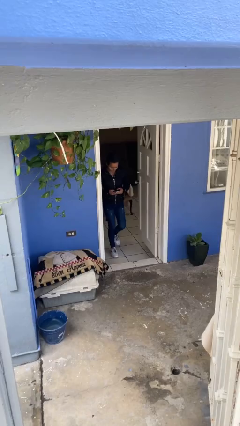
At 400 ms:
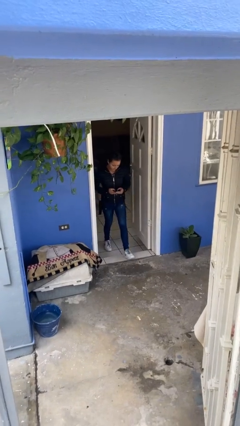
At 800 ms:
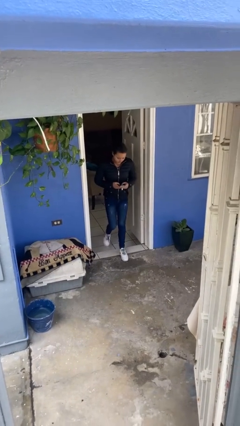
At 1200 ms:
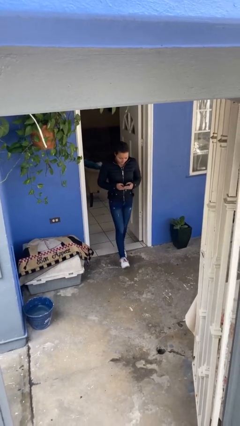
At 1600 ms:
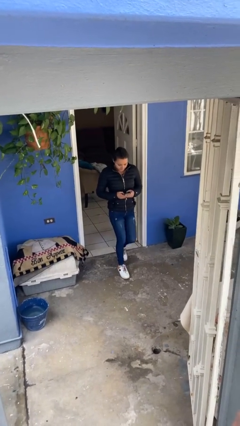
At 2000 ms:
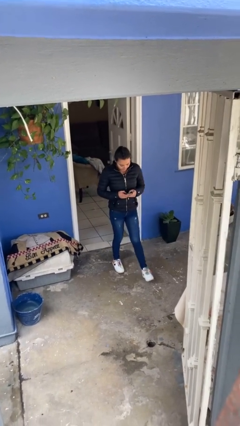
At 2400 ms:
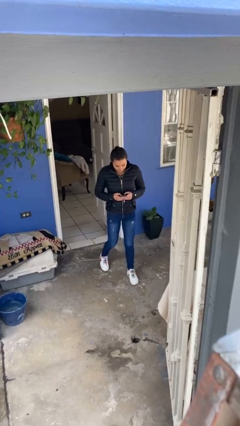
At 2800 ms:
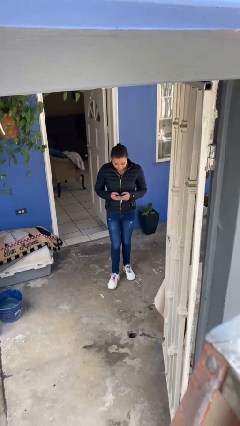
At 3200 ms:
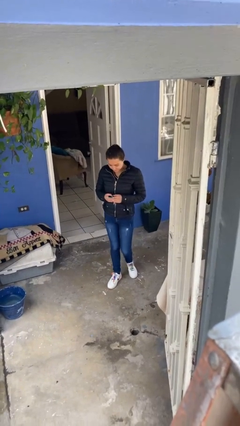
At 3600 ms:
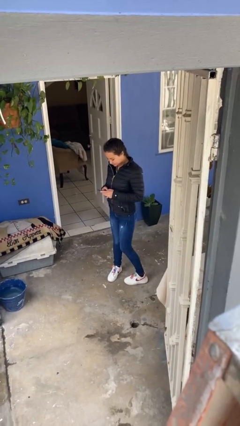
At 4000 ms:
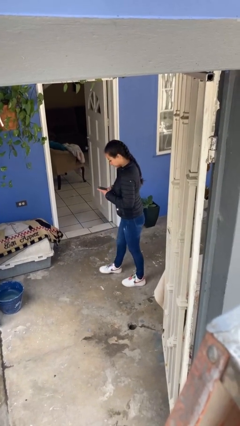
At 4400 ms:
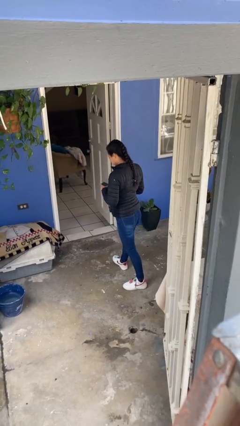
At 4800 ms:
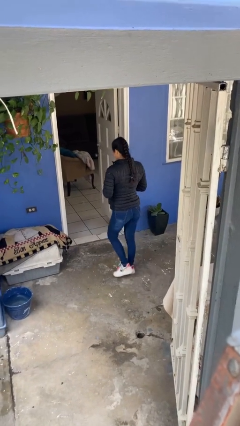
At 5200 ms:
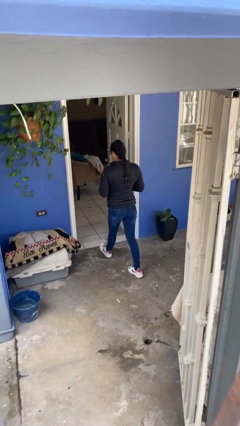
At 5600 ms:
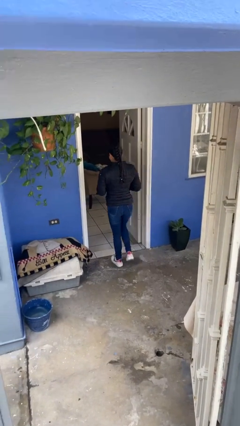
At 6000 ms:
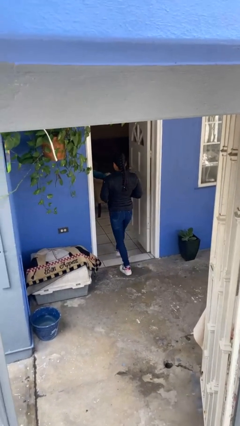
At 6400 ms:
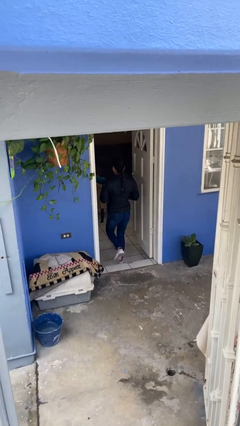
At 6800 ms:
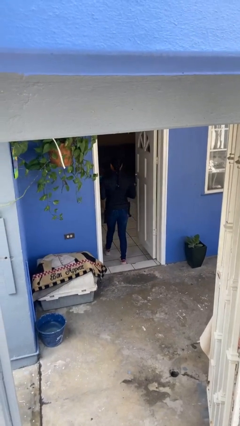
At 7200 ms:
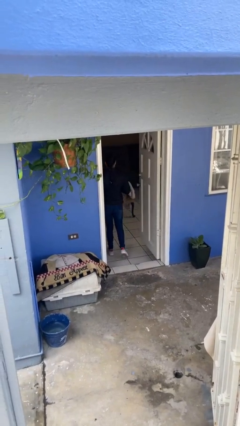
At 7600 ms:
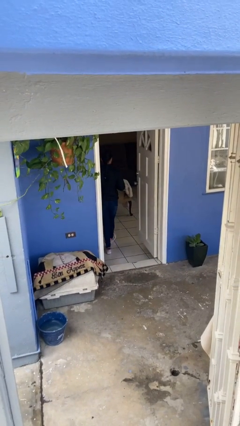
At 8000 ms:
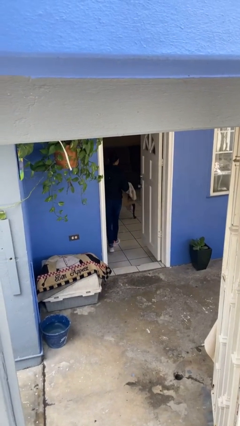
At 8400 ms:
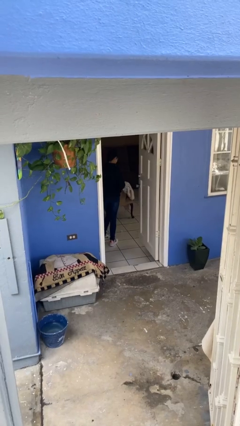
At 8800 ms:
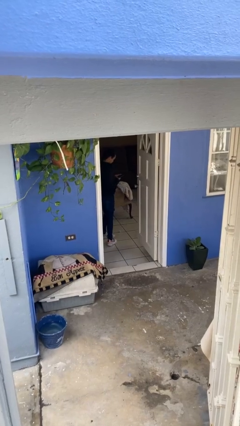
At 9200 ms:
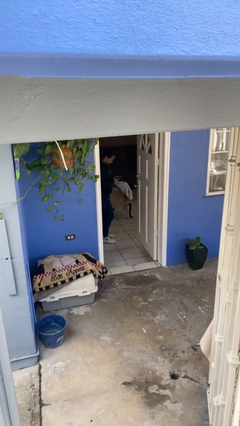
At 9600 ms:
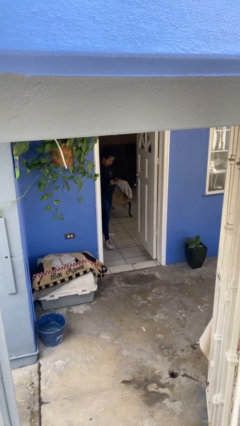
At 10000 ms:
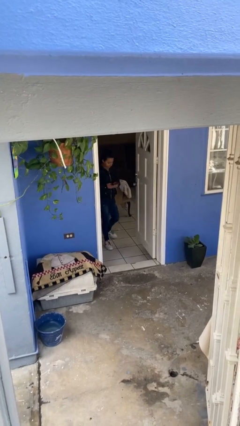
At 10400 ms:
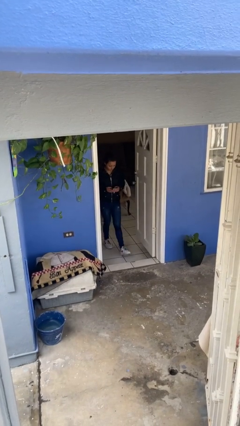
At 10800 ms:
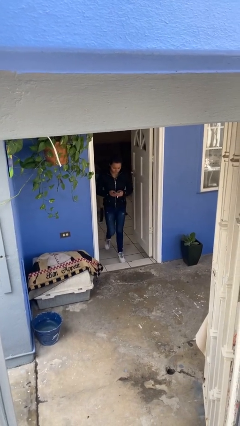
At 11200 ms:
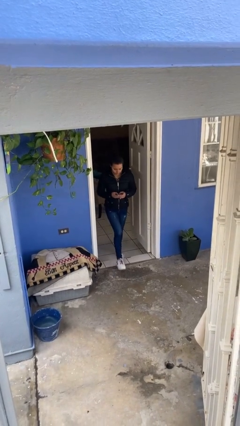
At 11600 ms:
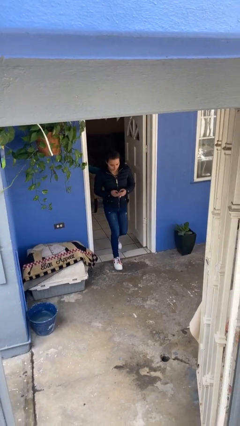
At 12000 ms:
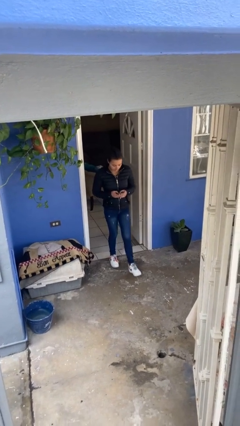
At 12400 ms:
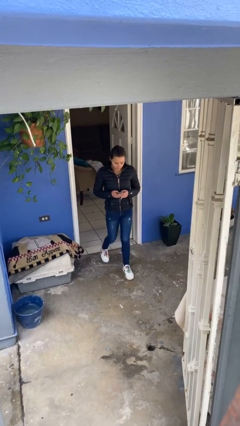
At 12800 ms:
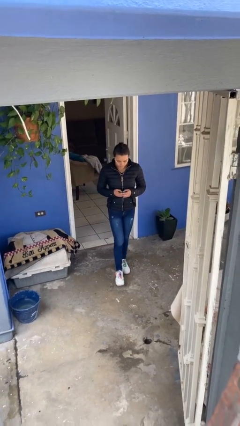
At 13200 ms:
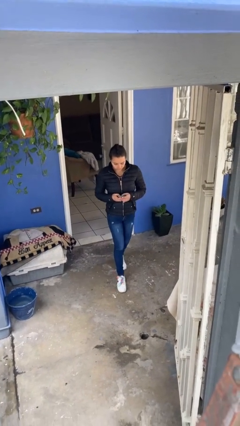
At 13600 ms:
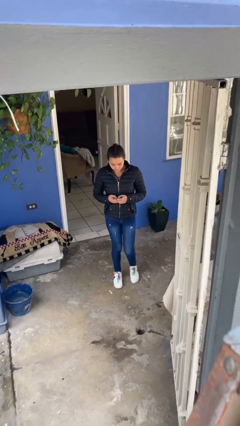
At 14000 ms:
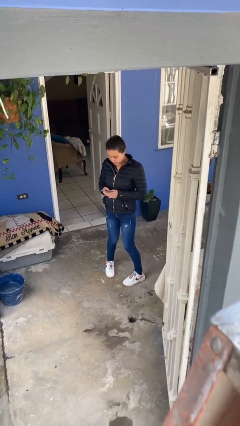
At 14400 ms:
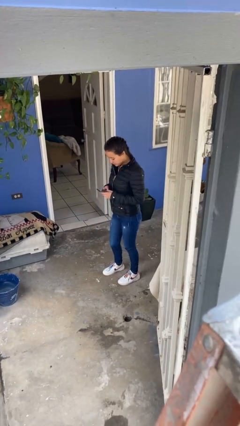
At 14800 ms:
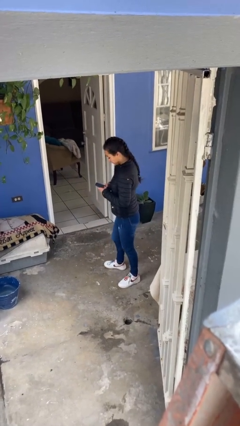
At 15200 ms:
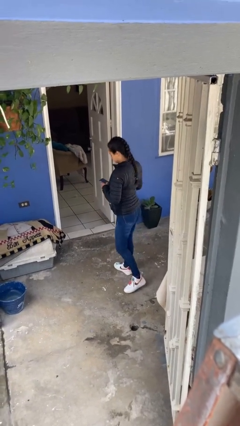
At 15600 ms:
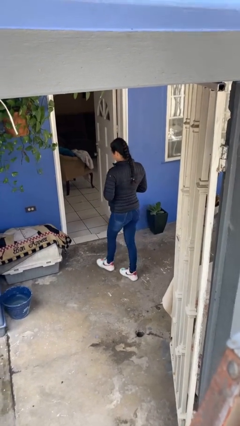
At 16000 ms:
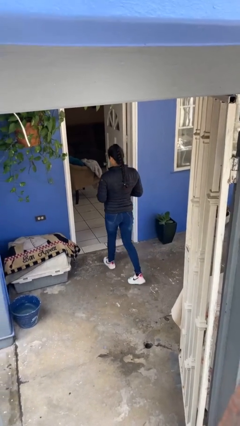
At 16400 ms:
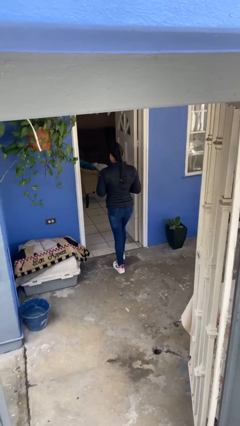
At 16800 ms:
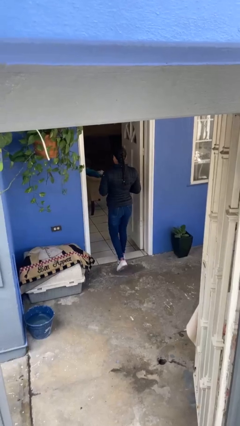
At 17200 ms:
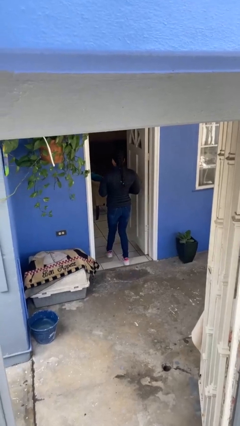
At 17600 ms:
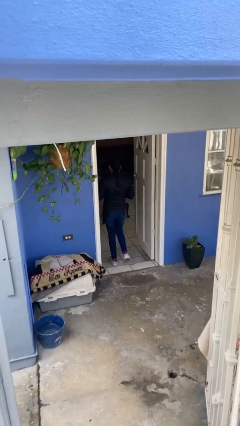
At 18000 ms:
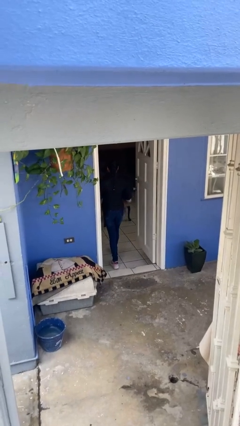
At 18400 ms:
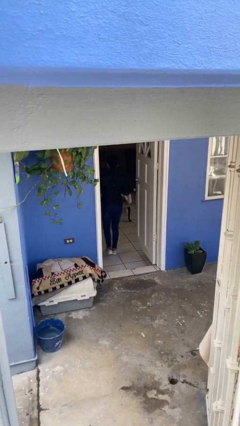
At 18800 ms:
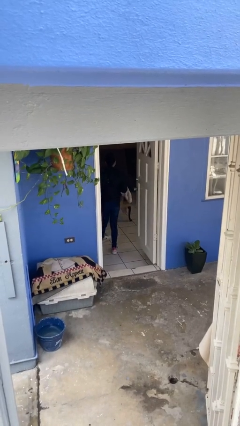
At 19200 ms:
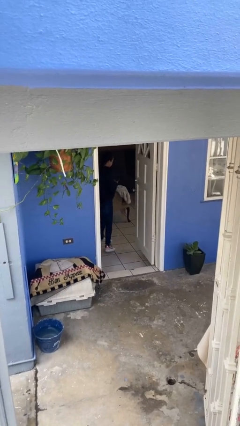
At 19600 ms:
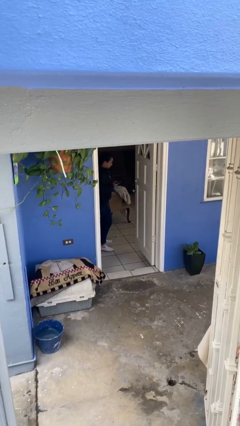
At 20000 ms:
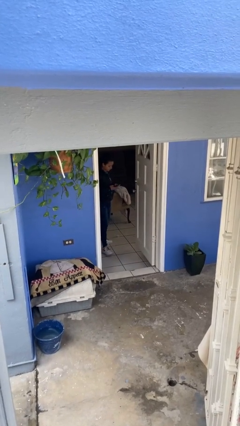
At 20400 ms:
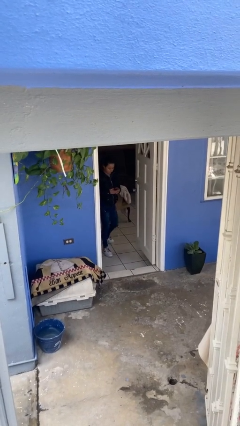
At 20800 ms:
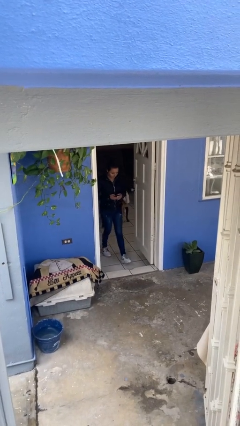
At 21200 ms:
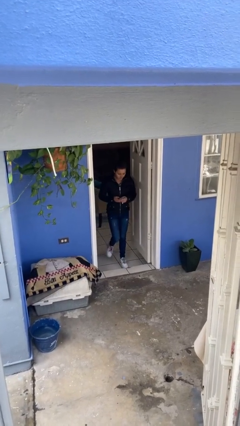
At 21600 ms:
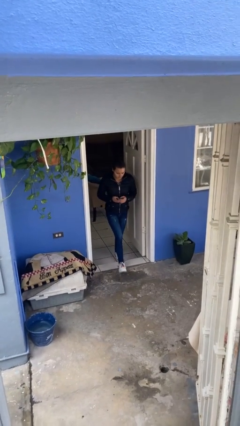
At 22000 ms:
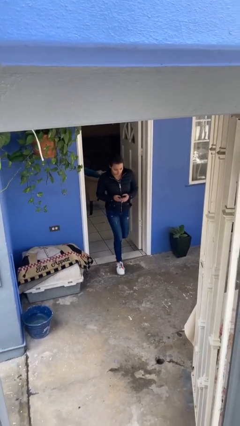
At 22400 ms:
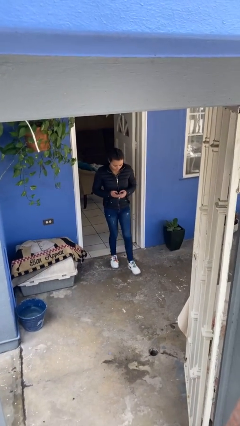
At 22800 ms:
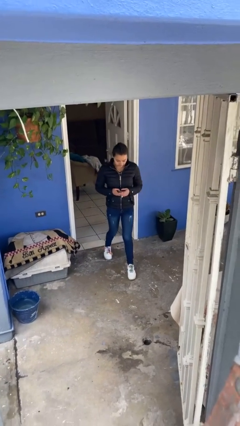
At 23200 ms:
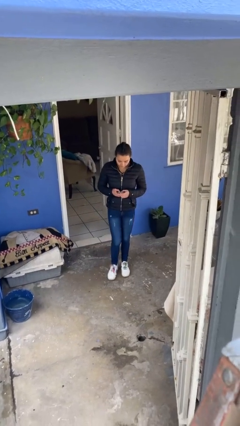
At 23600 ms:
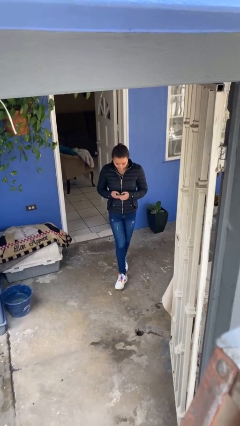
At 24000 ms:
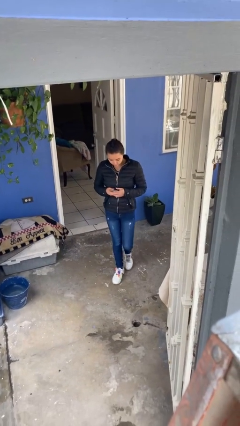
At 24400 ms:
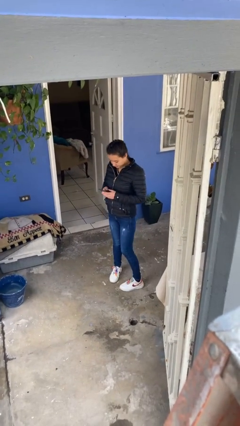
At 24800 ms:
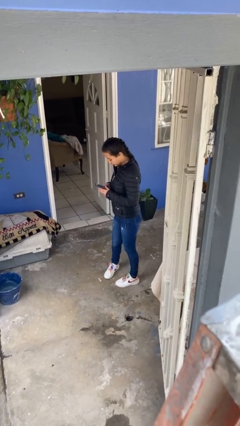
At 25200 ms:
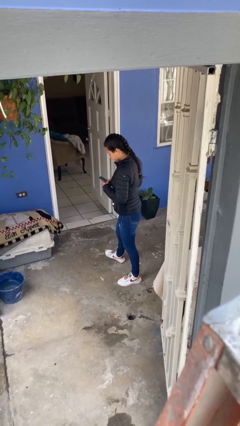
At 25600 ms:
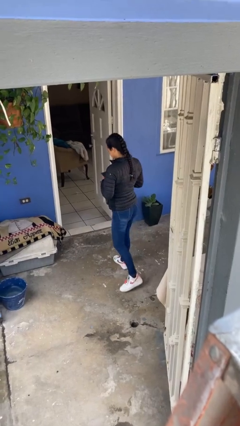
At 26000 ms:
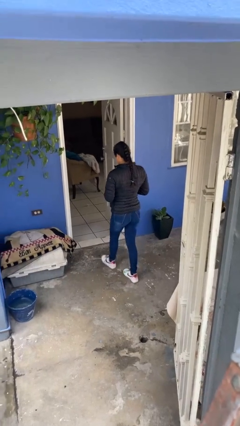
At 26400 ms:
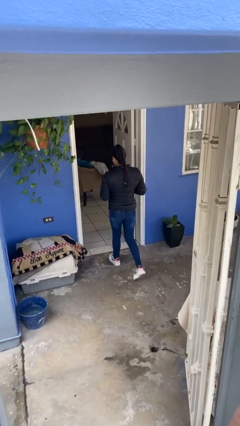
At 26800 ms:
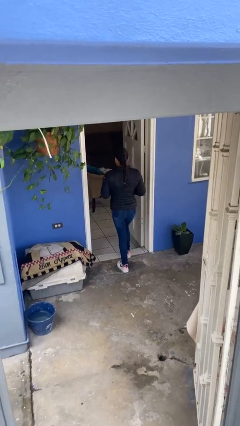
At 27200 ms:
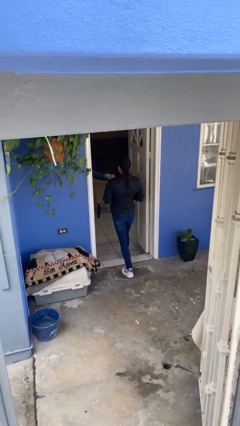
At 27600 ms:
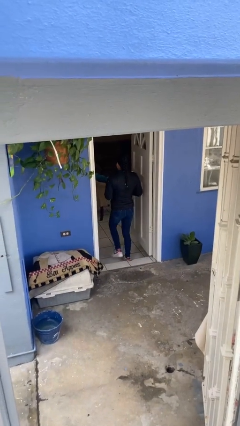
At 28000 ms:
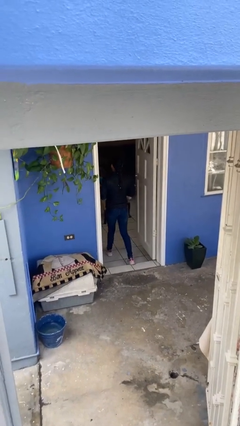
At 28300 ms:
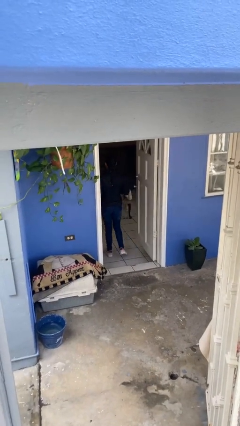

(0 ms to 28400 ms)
person texts on phone

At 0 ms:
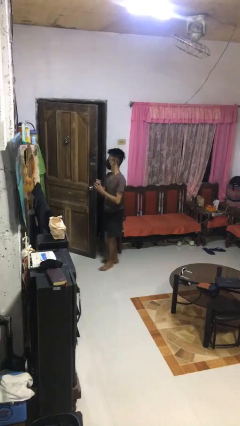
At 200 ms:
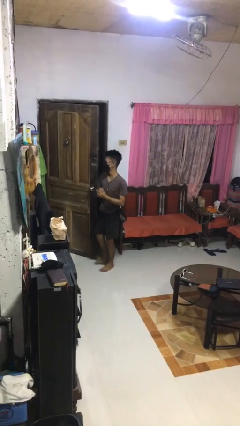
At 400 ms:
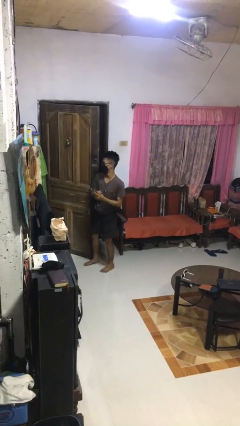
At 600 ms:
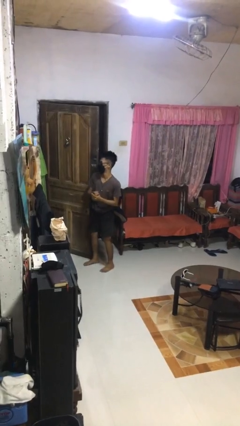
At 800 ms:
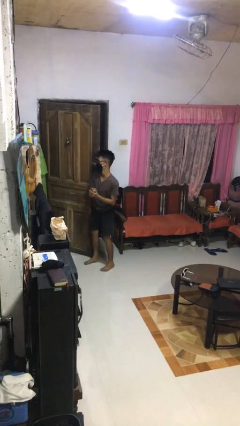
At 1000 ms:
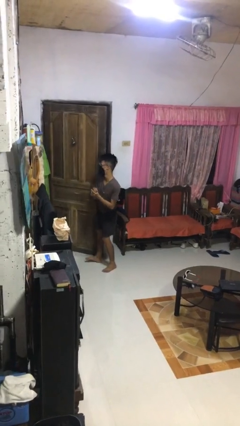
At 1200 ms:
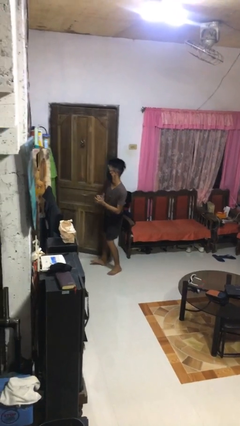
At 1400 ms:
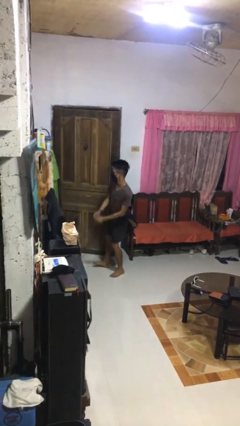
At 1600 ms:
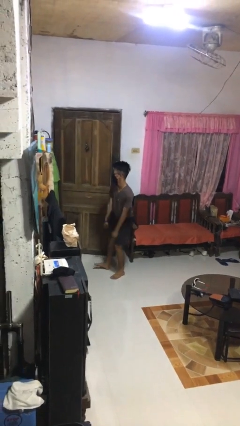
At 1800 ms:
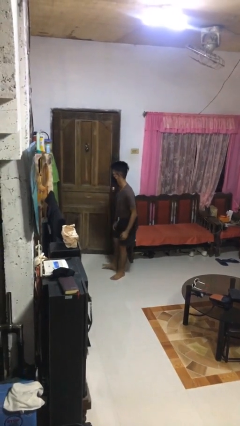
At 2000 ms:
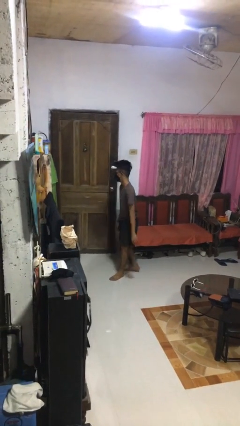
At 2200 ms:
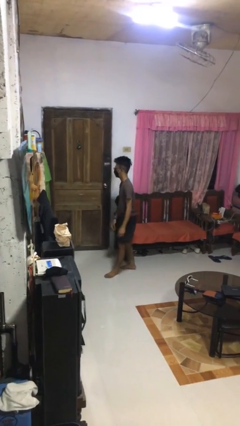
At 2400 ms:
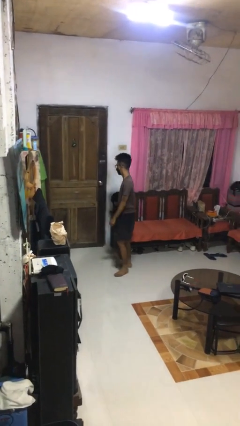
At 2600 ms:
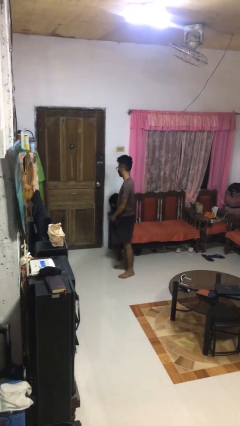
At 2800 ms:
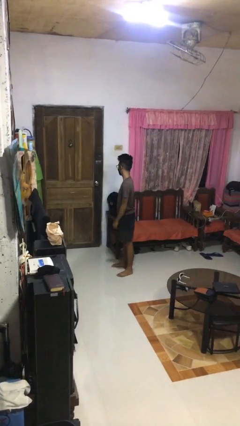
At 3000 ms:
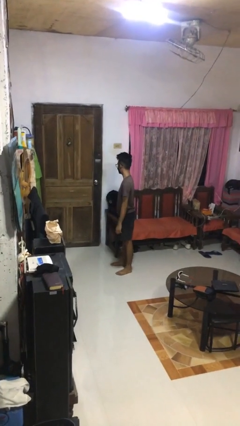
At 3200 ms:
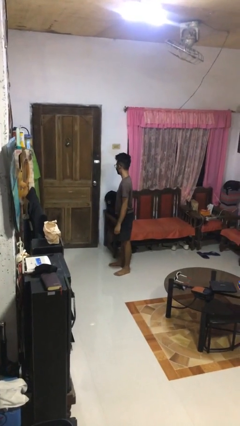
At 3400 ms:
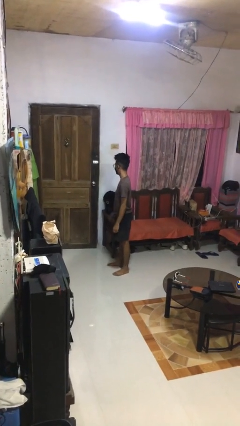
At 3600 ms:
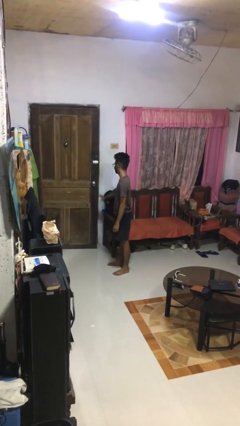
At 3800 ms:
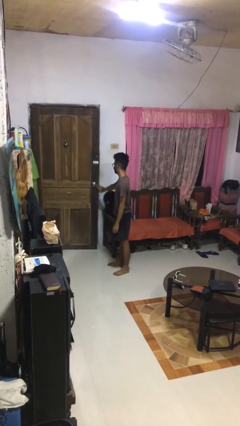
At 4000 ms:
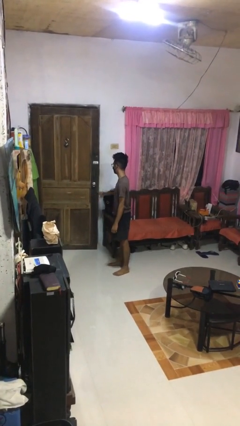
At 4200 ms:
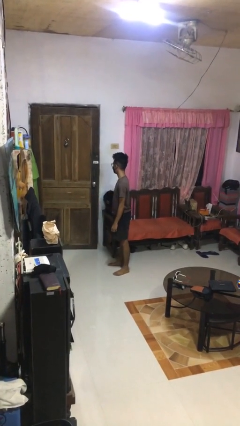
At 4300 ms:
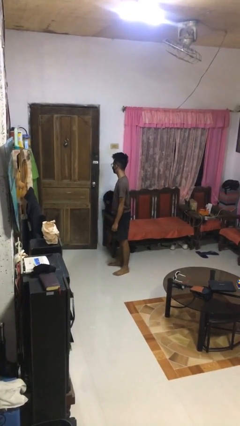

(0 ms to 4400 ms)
person closes door with hip
